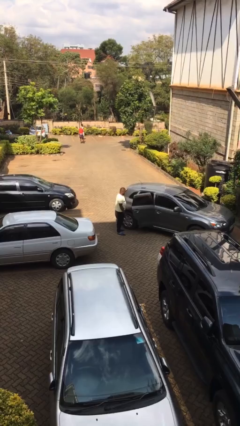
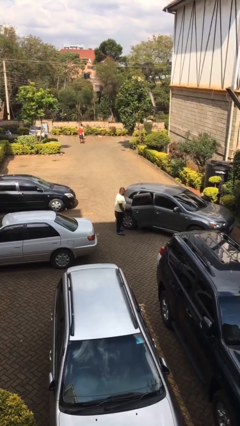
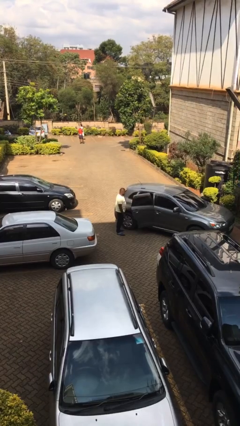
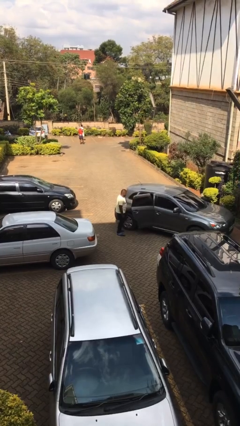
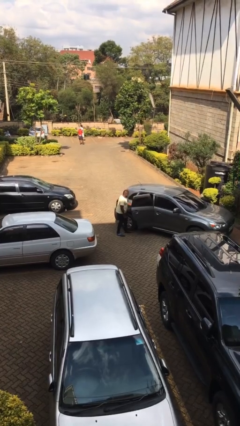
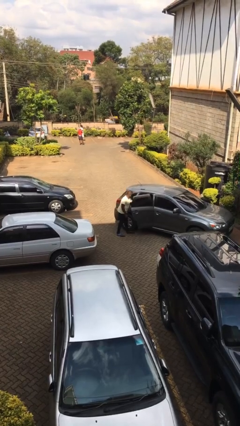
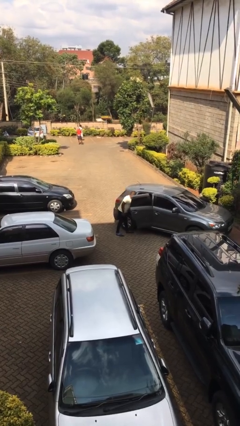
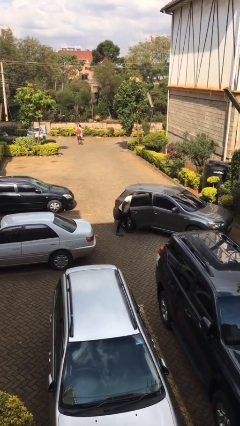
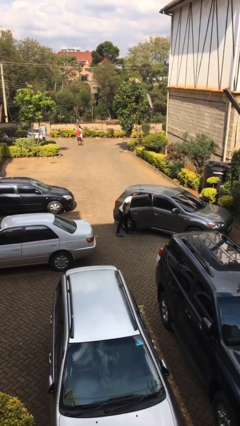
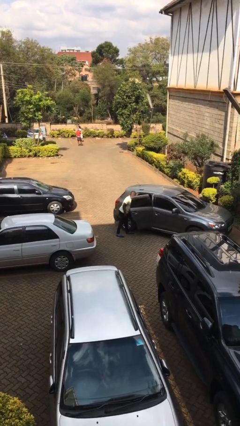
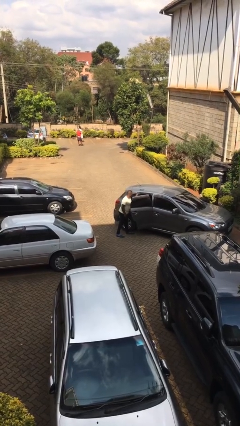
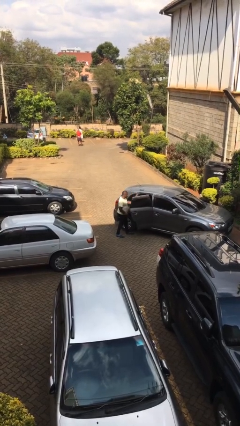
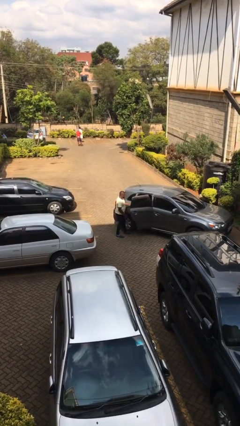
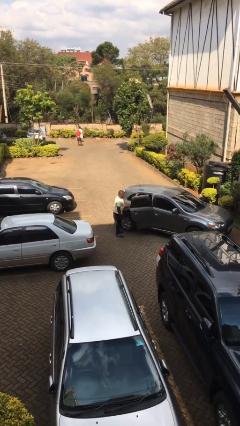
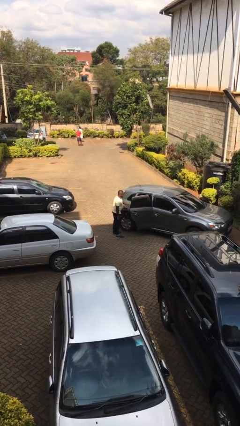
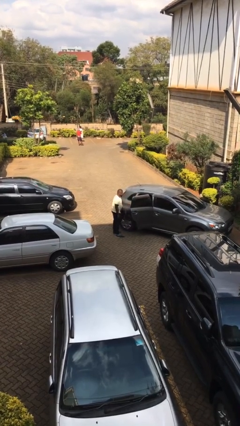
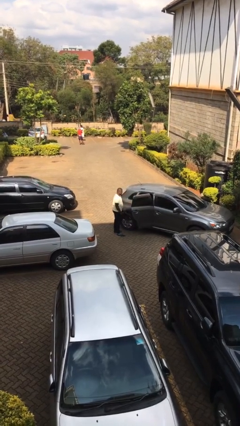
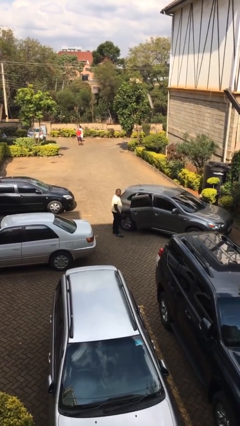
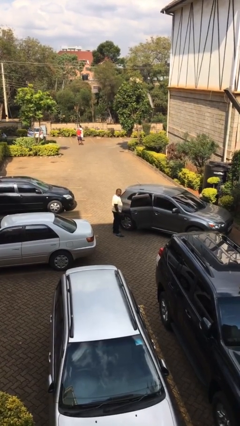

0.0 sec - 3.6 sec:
person unloads car

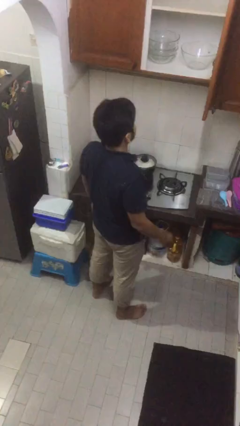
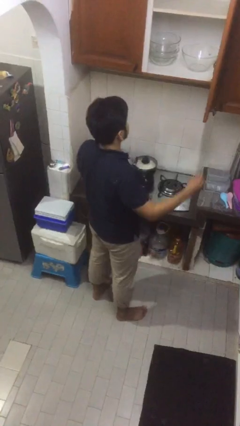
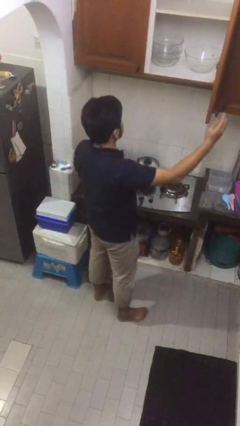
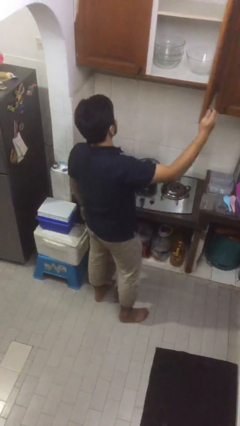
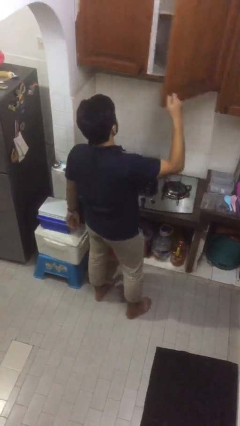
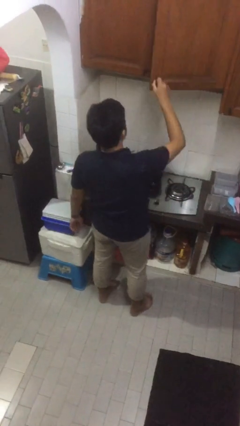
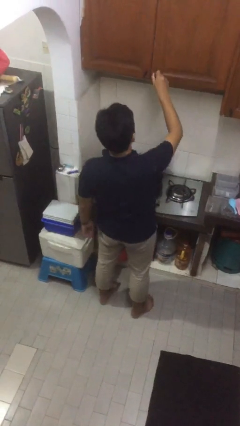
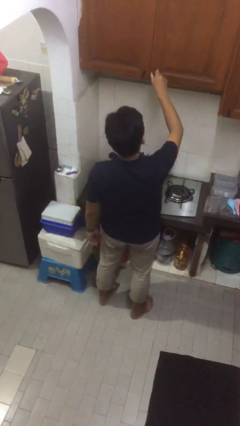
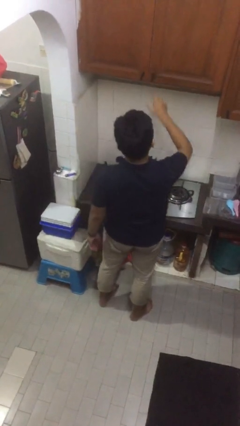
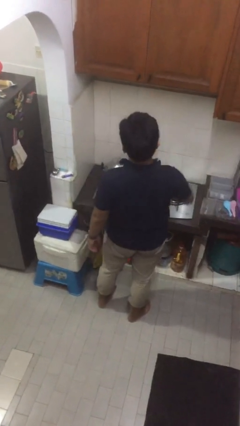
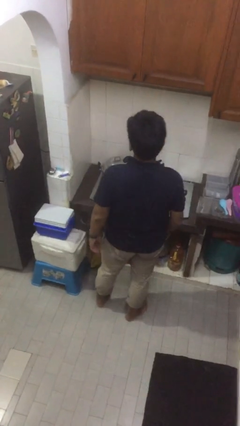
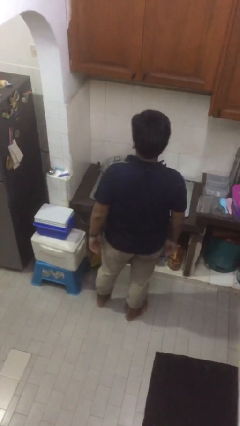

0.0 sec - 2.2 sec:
person closes cabinet

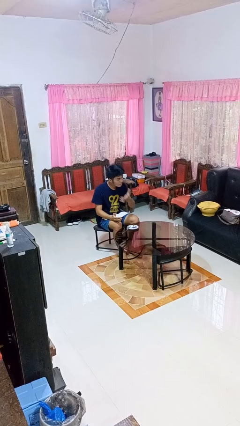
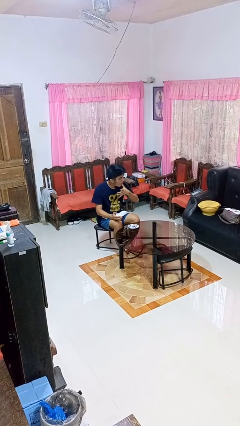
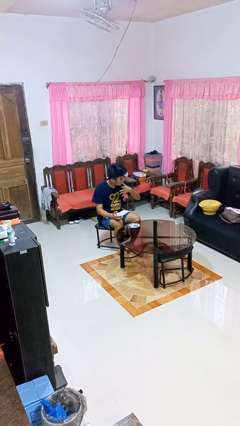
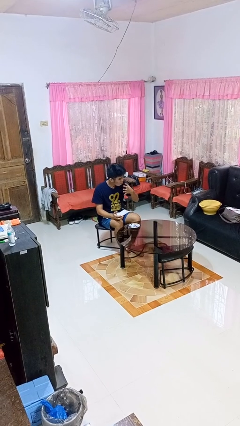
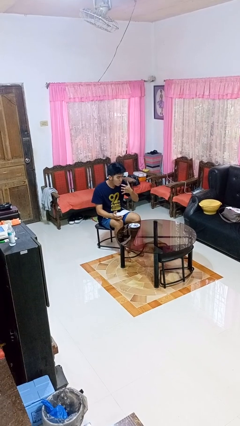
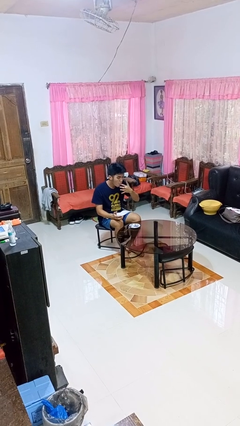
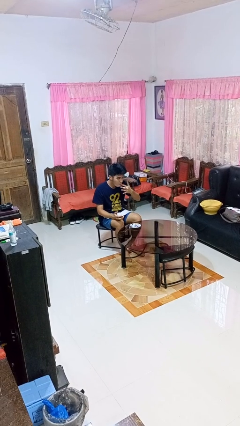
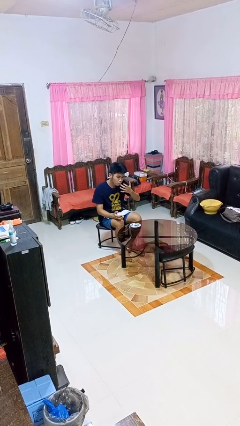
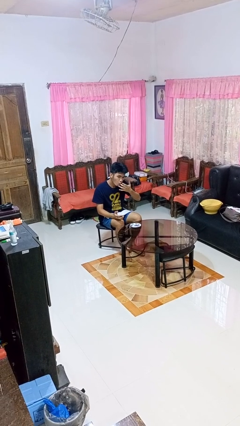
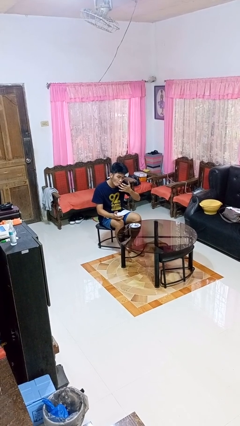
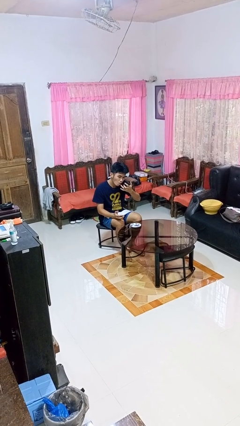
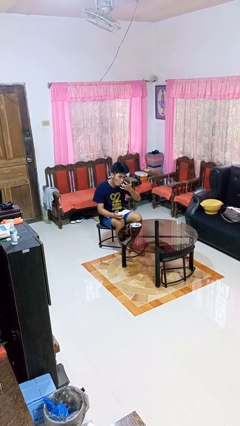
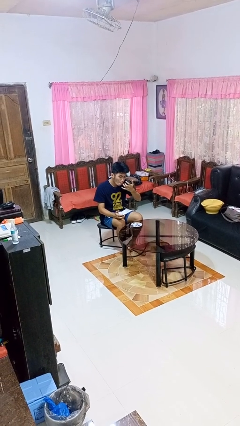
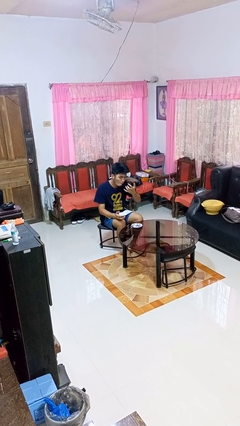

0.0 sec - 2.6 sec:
person licks fingers

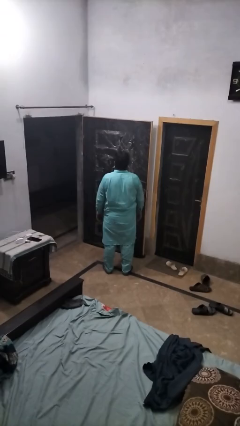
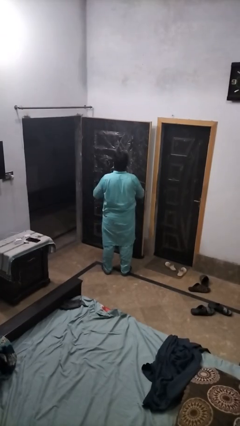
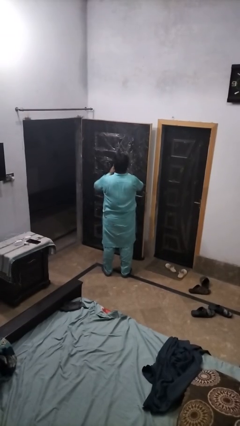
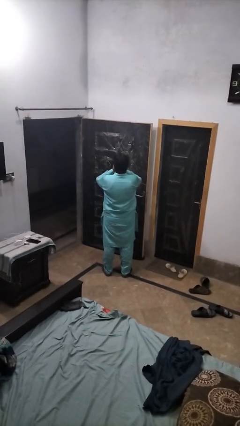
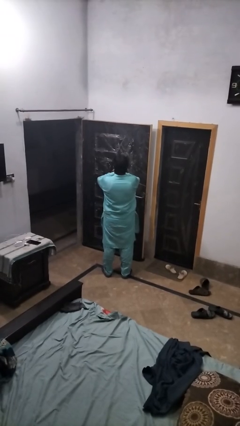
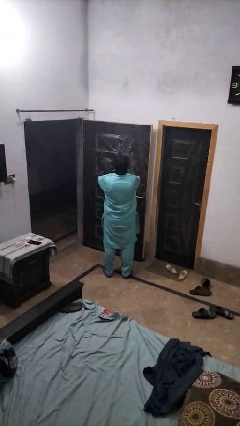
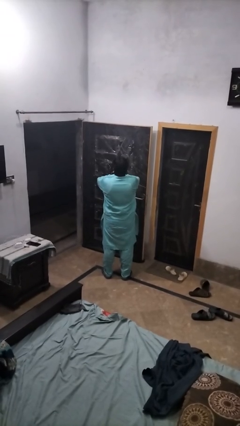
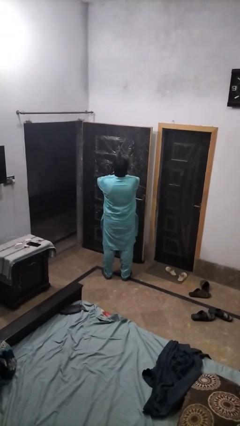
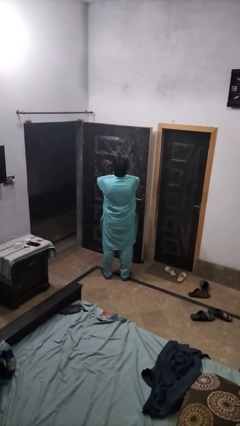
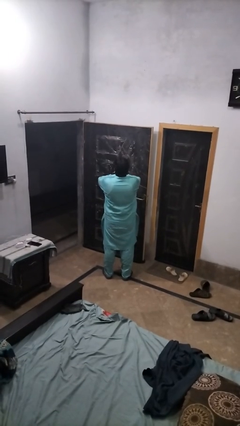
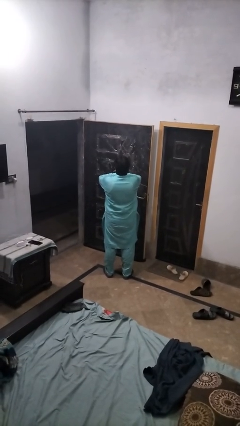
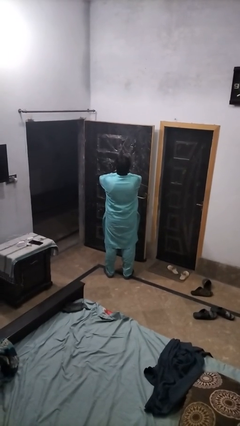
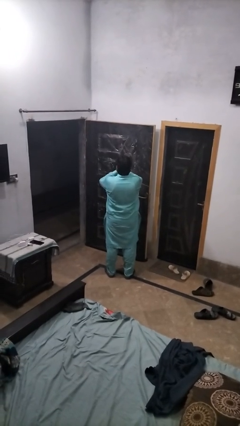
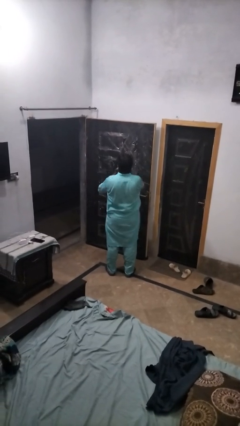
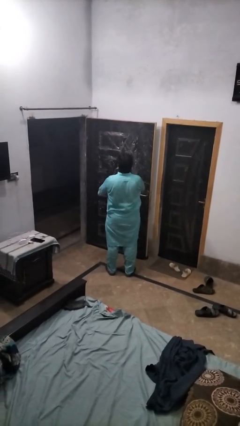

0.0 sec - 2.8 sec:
person yawns

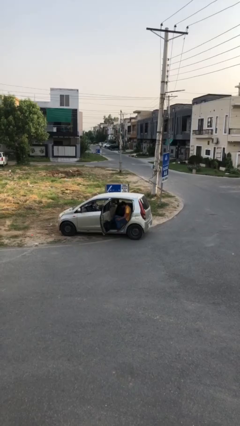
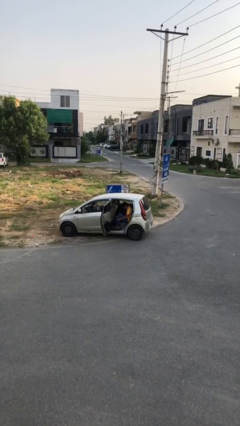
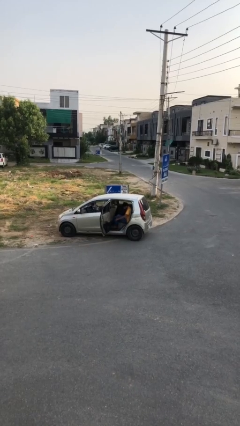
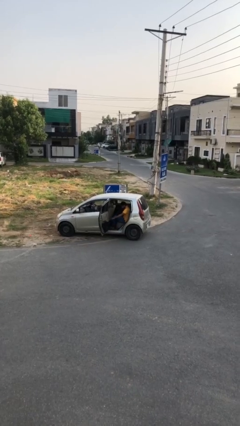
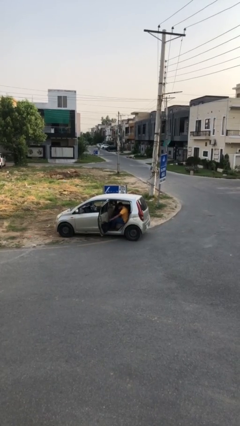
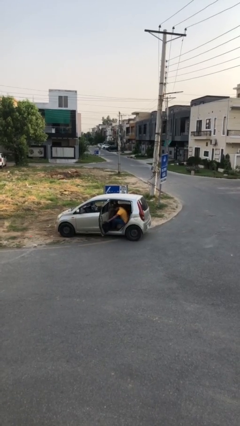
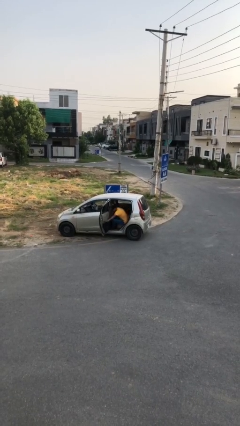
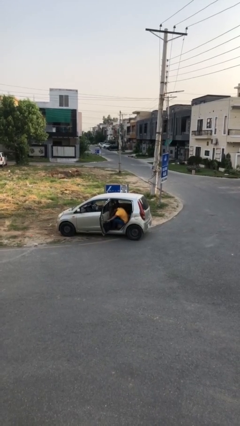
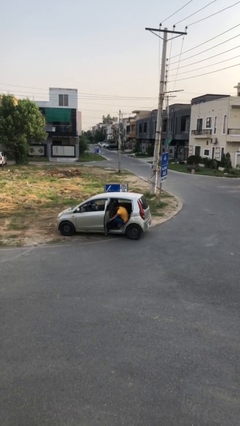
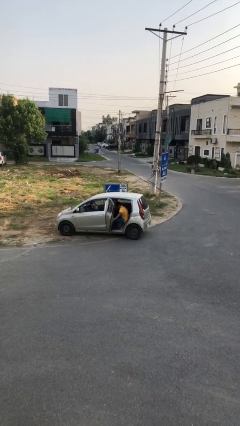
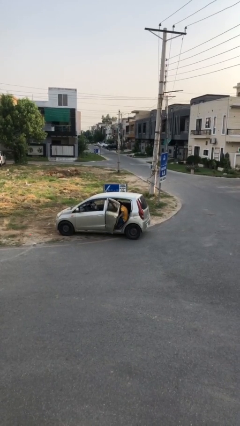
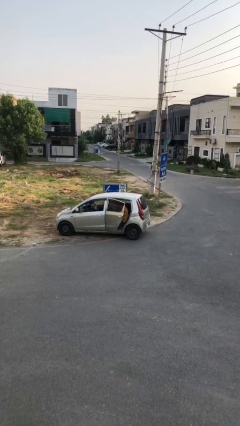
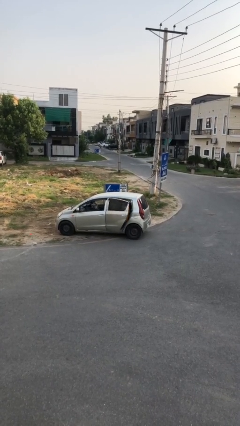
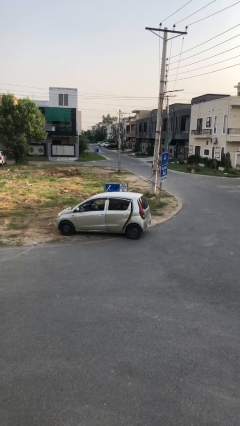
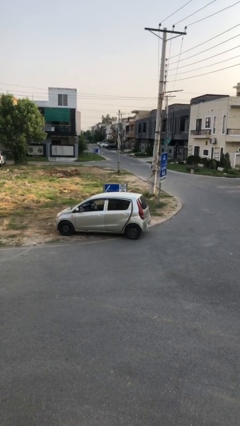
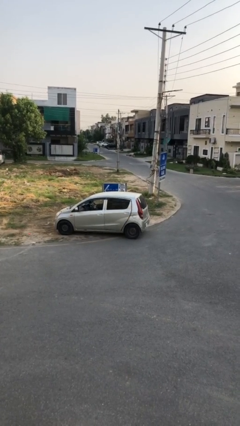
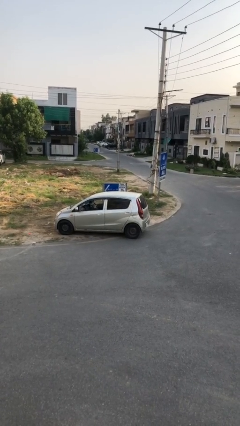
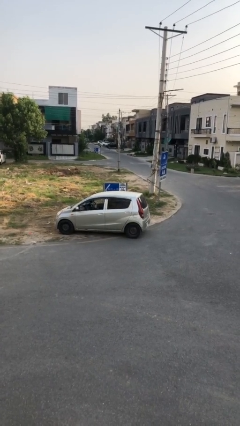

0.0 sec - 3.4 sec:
person closes car door

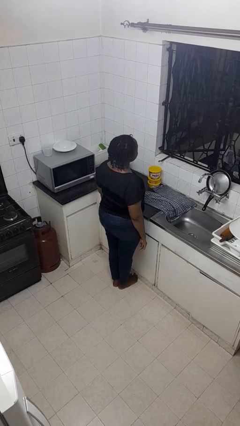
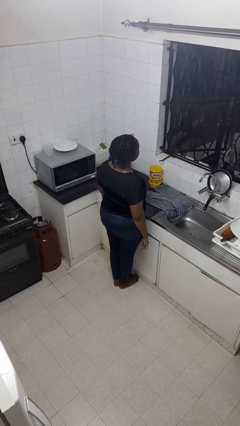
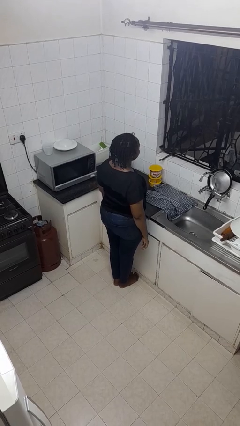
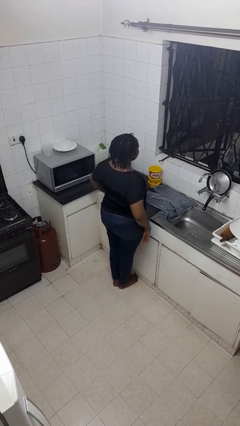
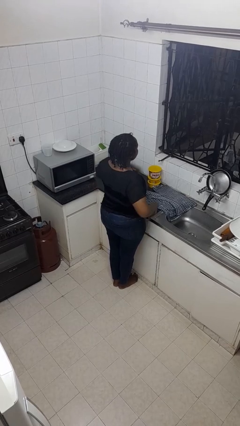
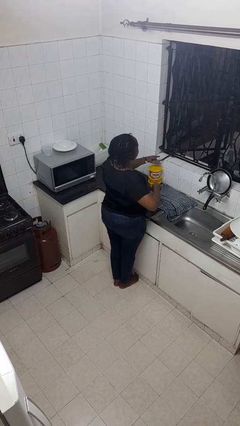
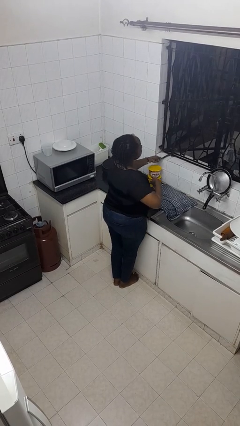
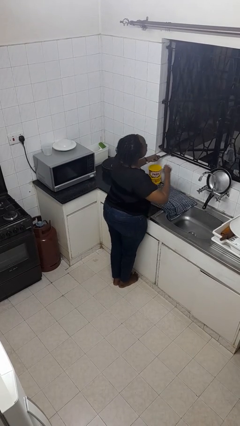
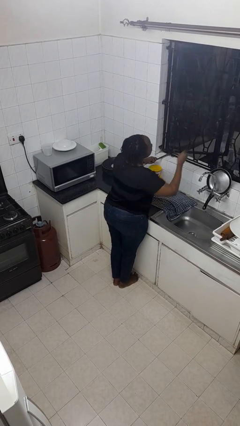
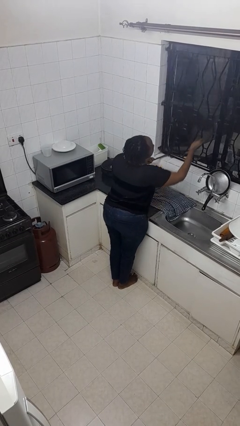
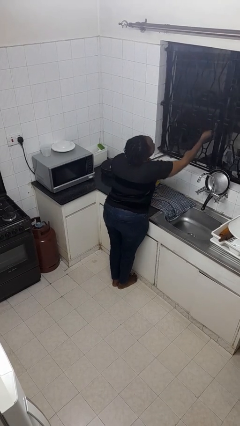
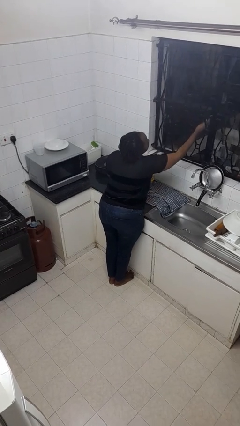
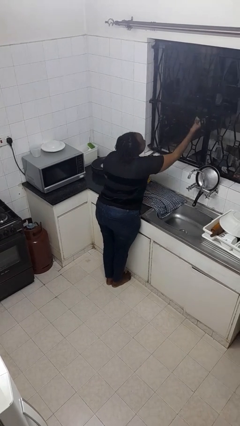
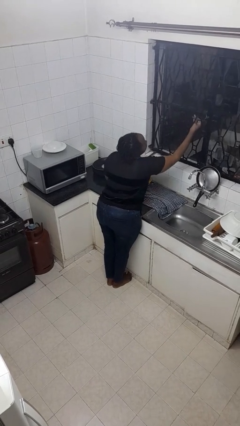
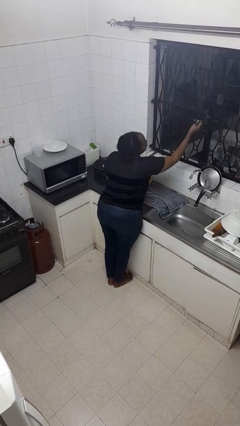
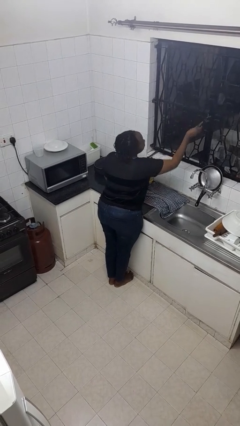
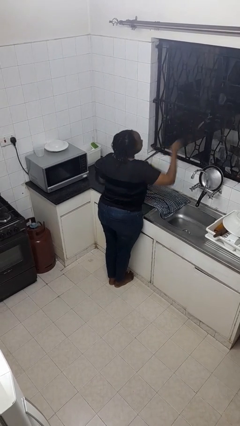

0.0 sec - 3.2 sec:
person closes home window
